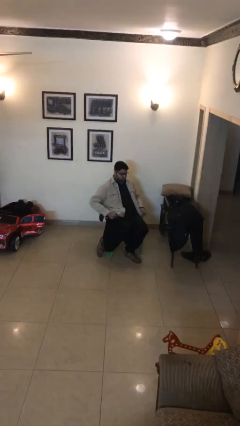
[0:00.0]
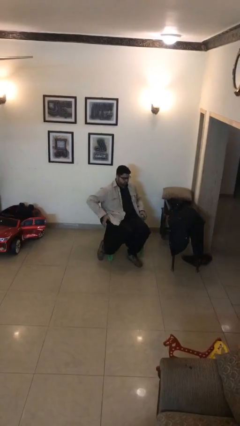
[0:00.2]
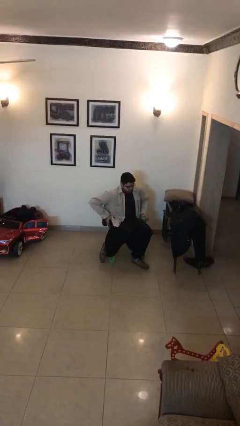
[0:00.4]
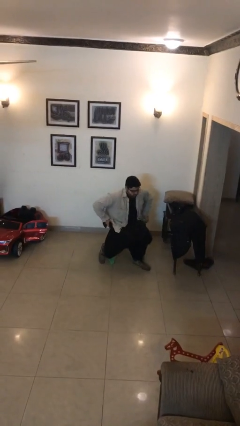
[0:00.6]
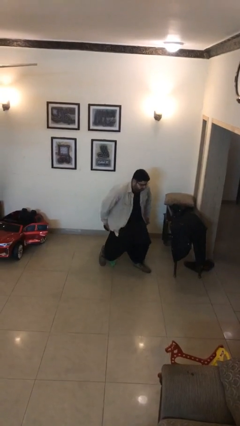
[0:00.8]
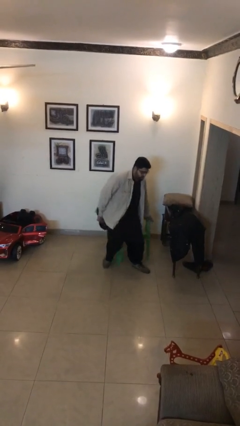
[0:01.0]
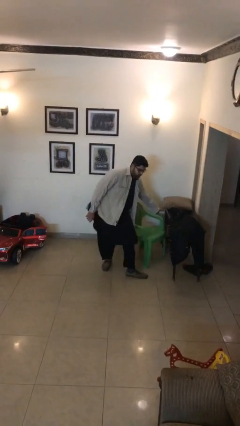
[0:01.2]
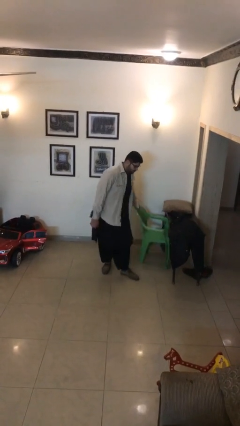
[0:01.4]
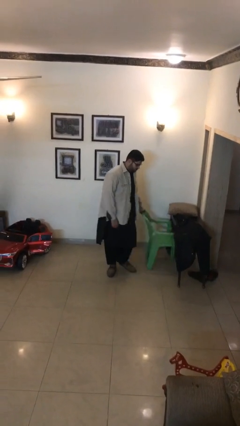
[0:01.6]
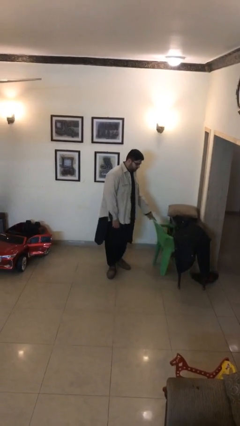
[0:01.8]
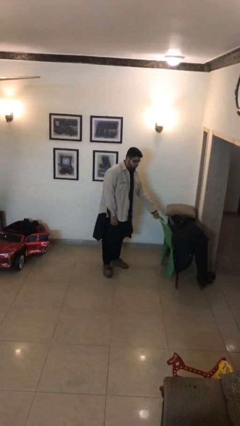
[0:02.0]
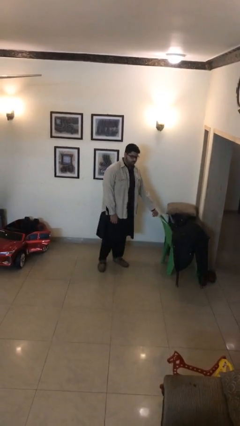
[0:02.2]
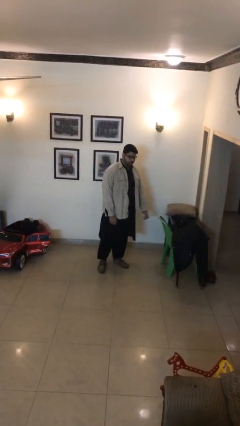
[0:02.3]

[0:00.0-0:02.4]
person stands up

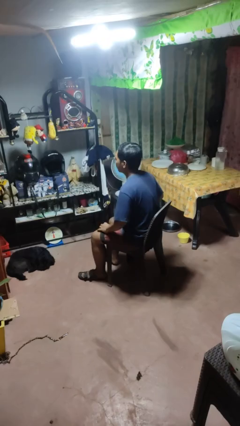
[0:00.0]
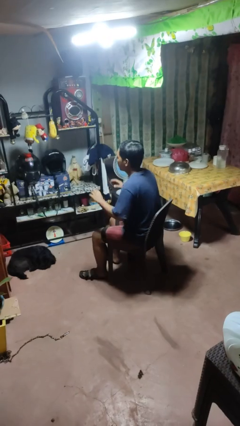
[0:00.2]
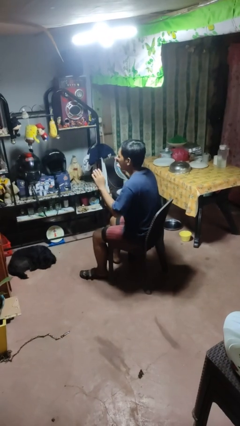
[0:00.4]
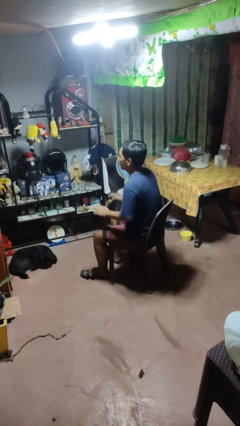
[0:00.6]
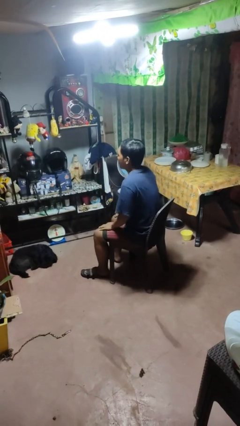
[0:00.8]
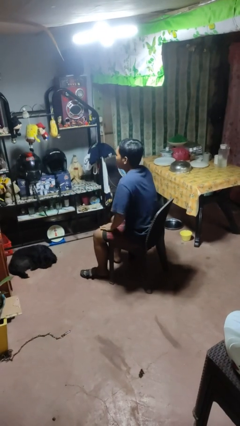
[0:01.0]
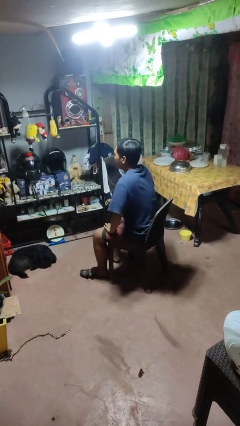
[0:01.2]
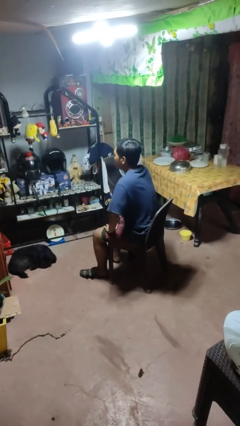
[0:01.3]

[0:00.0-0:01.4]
person slaps hands on thighs

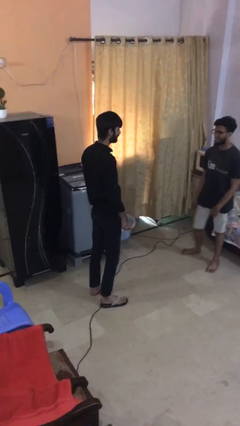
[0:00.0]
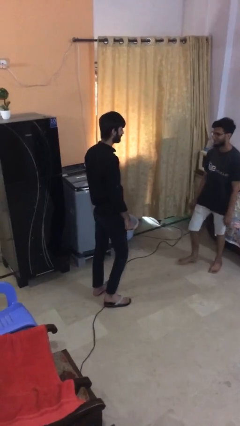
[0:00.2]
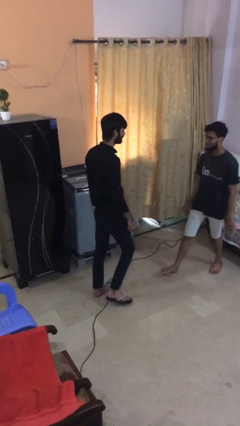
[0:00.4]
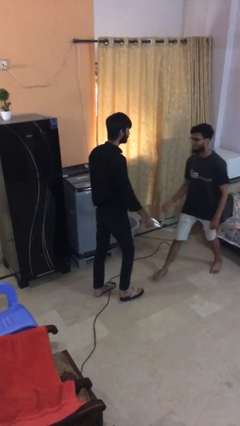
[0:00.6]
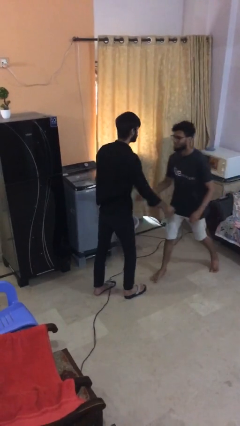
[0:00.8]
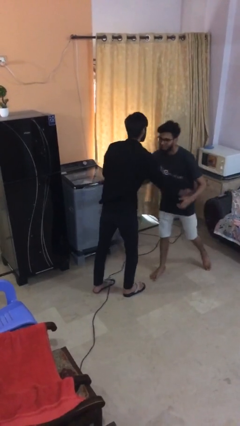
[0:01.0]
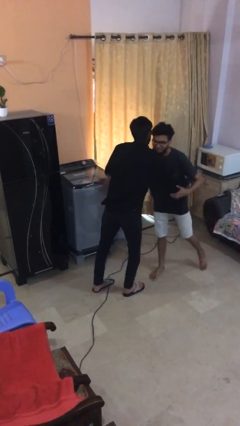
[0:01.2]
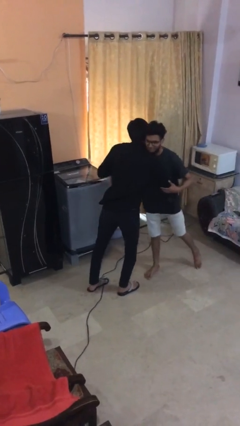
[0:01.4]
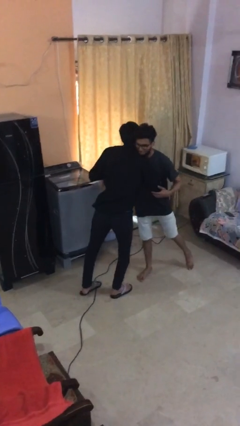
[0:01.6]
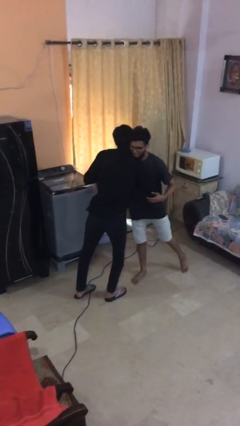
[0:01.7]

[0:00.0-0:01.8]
person embraces person

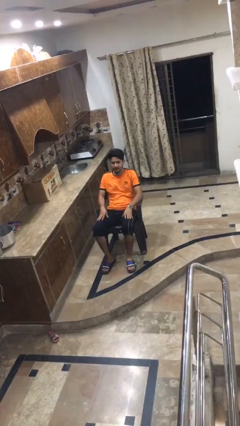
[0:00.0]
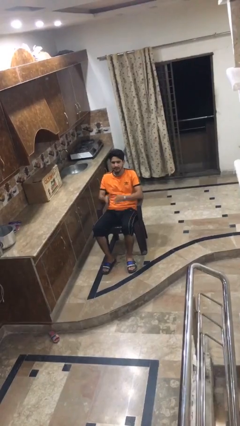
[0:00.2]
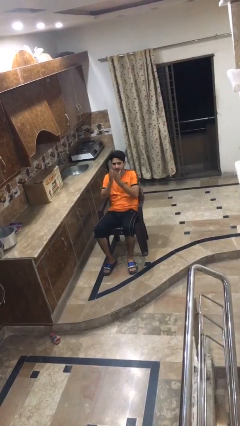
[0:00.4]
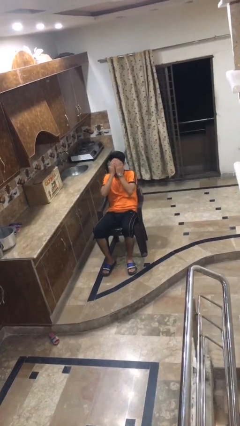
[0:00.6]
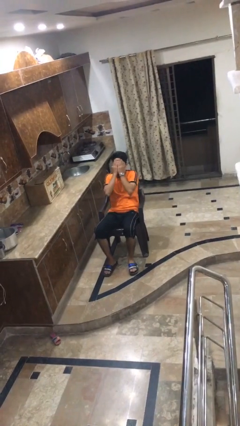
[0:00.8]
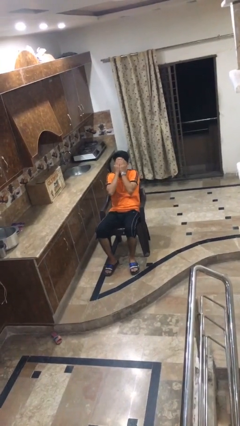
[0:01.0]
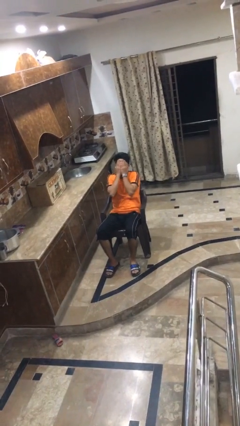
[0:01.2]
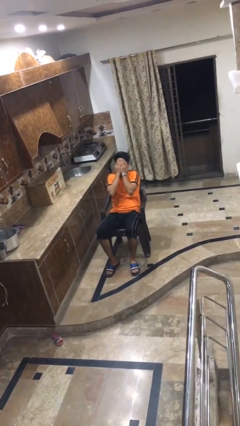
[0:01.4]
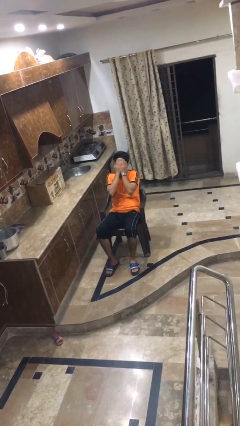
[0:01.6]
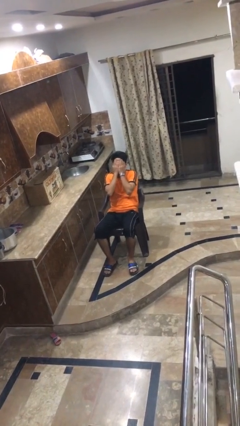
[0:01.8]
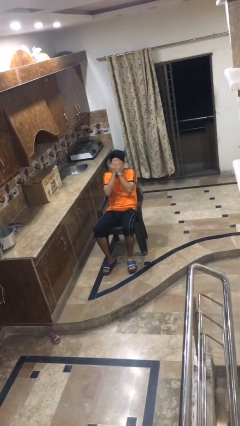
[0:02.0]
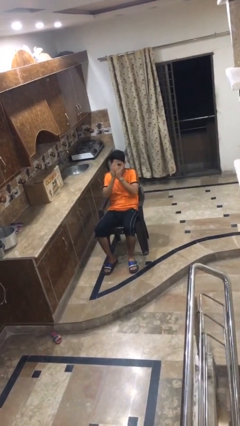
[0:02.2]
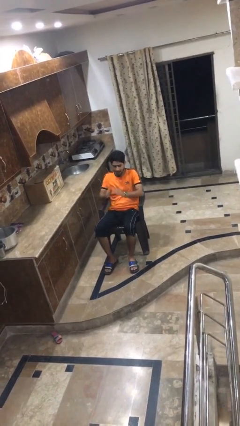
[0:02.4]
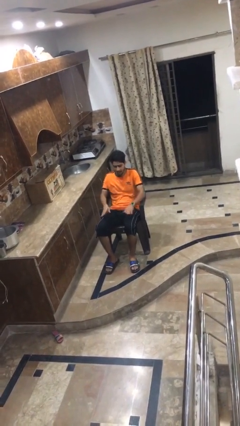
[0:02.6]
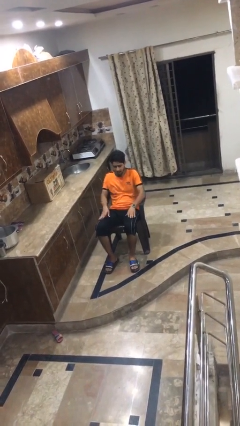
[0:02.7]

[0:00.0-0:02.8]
person covers face with hands

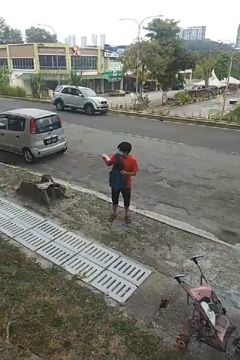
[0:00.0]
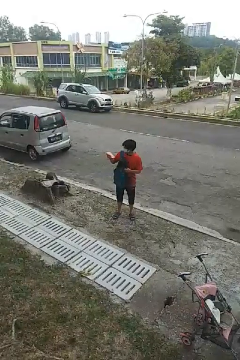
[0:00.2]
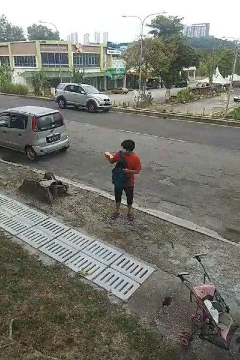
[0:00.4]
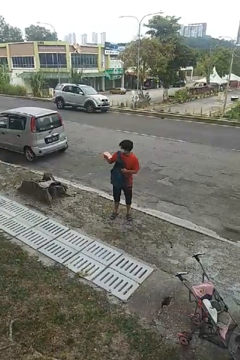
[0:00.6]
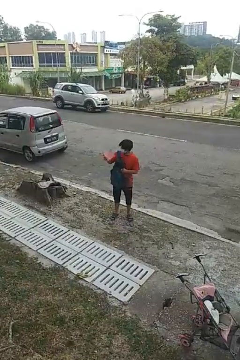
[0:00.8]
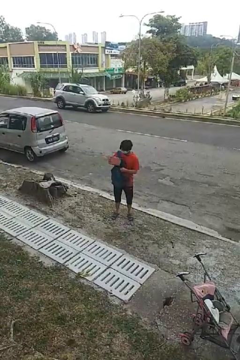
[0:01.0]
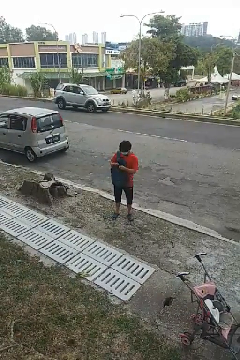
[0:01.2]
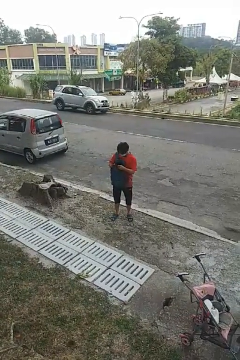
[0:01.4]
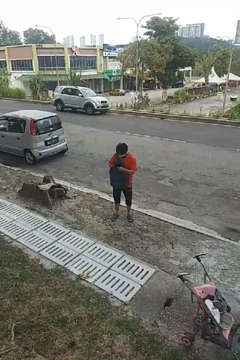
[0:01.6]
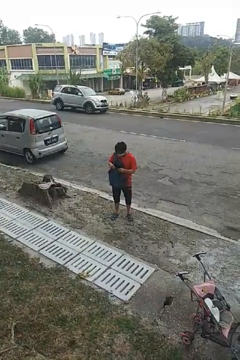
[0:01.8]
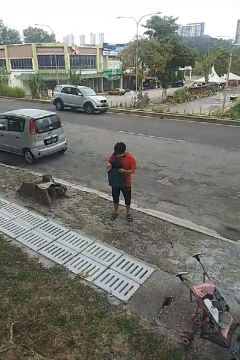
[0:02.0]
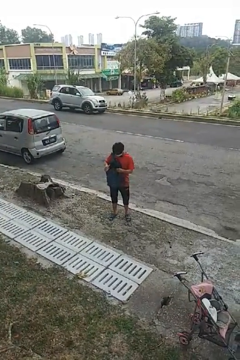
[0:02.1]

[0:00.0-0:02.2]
person puts object into backpack

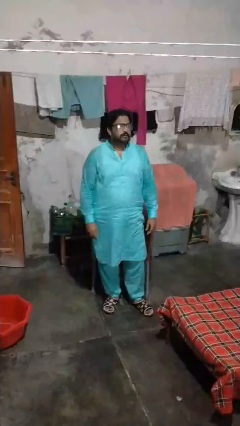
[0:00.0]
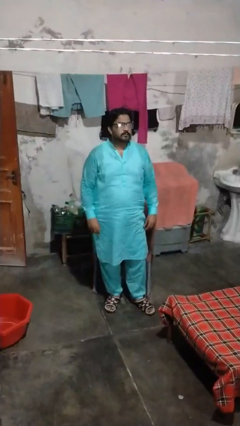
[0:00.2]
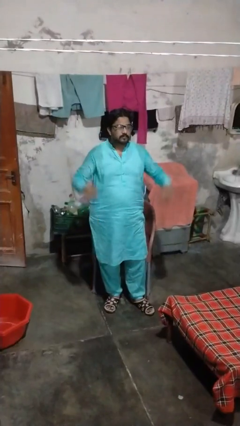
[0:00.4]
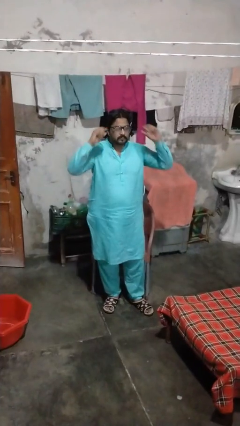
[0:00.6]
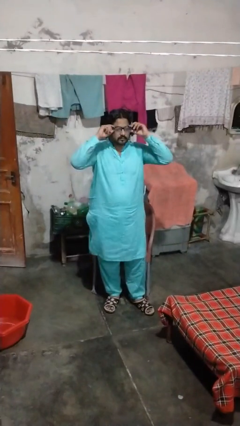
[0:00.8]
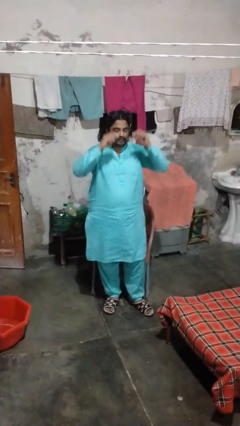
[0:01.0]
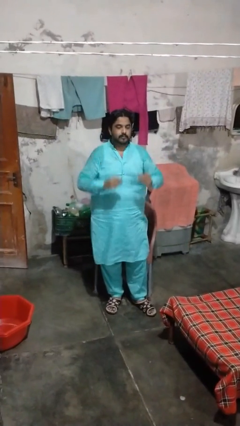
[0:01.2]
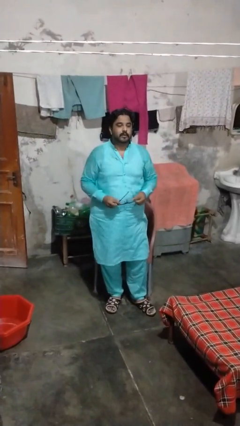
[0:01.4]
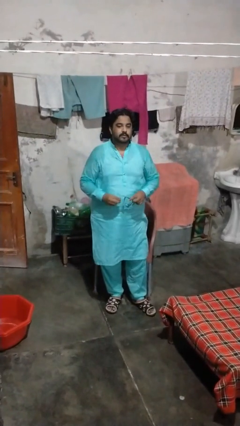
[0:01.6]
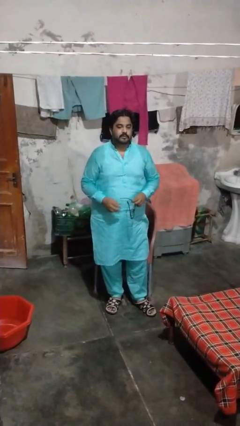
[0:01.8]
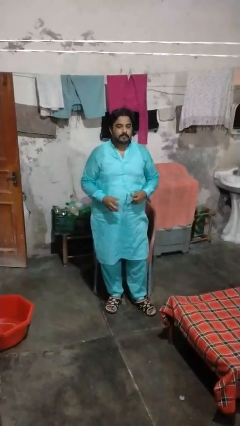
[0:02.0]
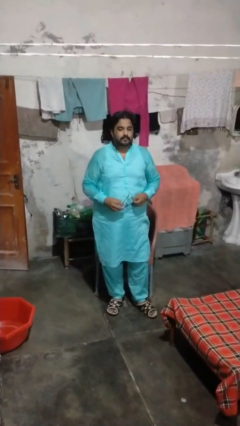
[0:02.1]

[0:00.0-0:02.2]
person takes off glasses

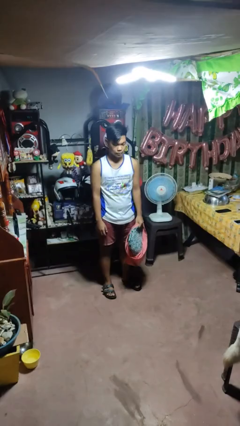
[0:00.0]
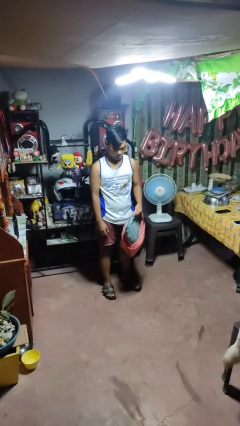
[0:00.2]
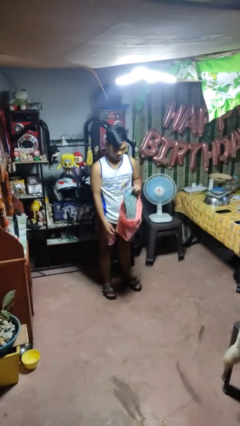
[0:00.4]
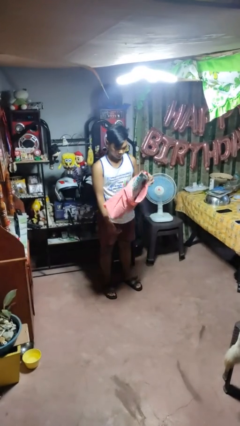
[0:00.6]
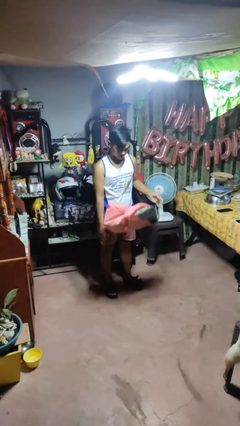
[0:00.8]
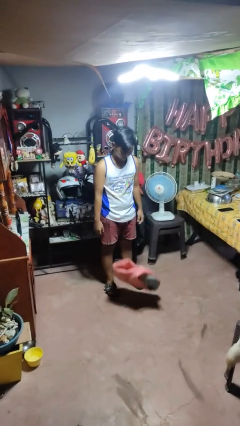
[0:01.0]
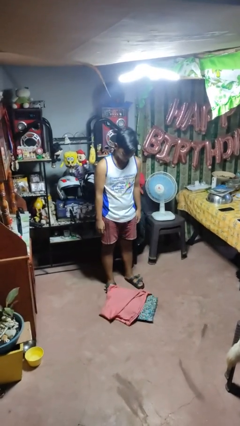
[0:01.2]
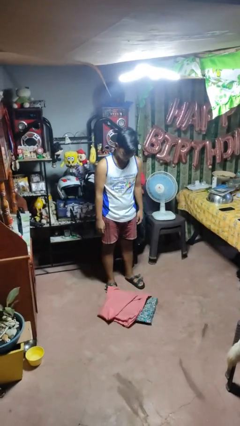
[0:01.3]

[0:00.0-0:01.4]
person drops object

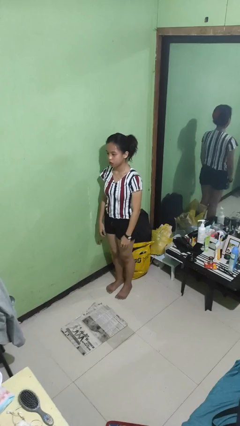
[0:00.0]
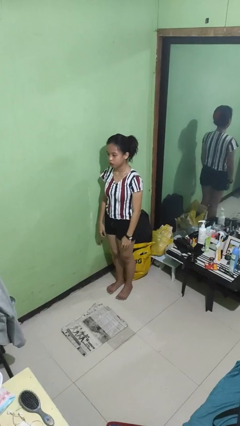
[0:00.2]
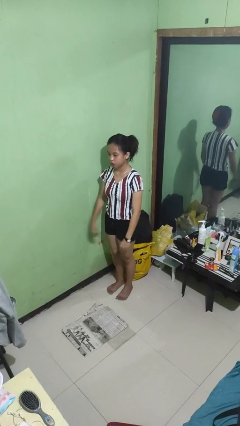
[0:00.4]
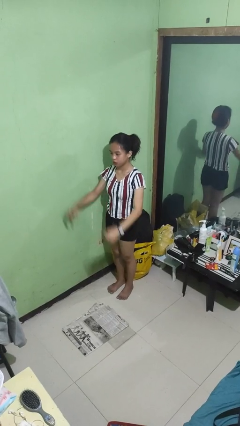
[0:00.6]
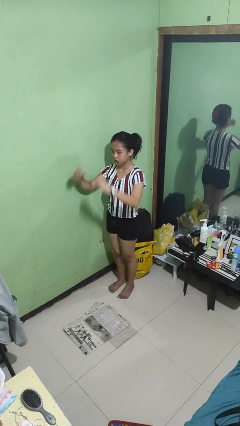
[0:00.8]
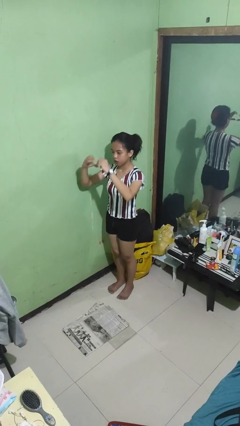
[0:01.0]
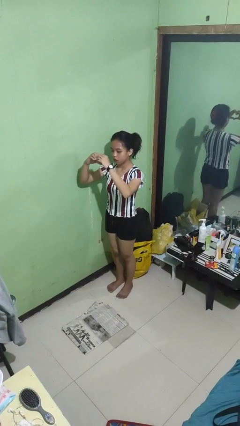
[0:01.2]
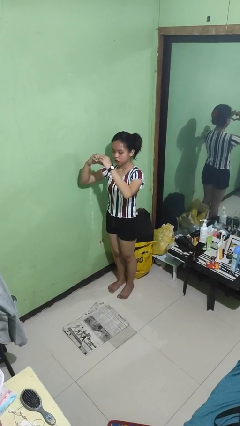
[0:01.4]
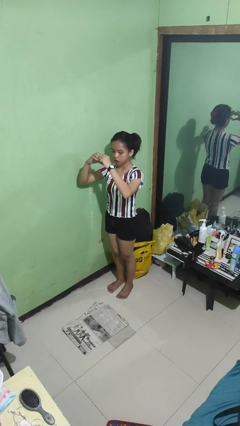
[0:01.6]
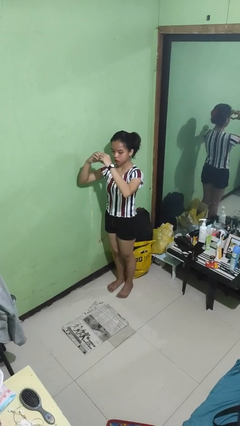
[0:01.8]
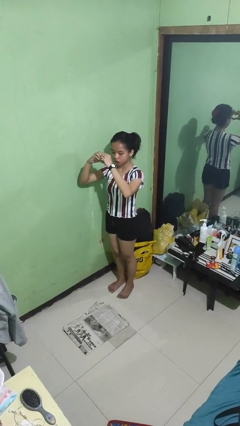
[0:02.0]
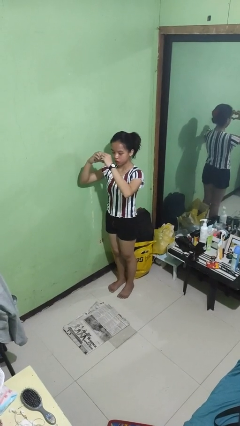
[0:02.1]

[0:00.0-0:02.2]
person gestures heart

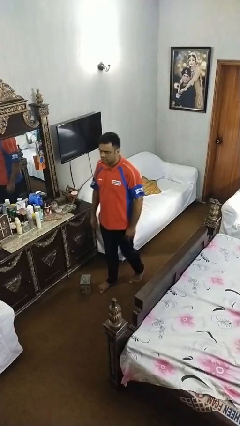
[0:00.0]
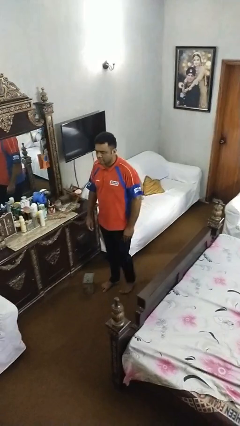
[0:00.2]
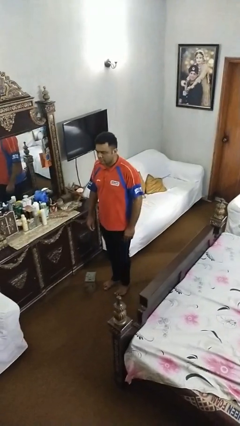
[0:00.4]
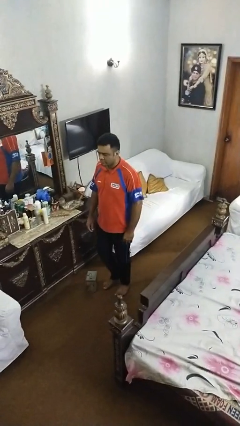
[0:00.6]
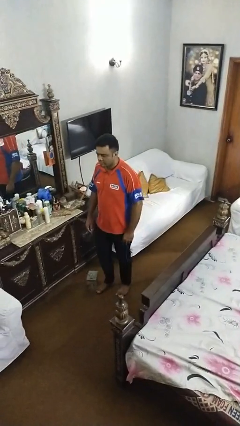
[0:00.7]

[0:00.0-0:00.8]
person trips on object on floor
